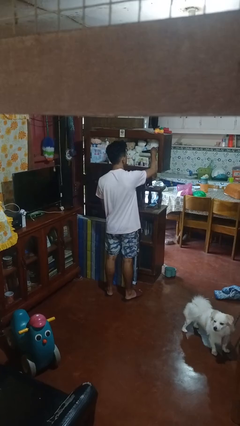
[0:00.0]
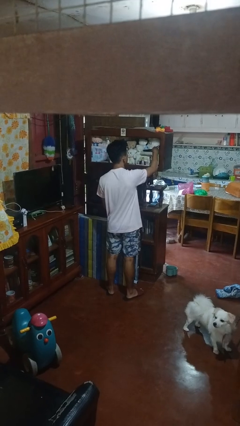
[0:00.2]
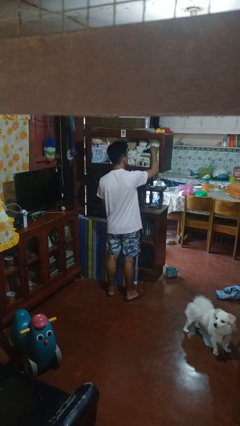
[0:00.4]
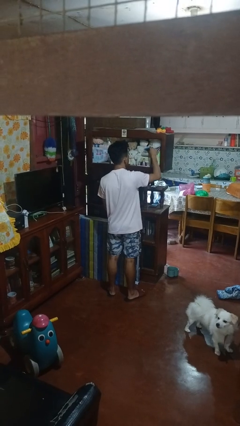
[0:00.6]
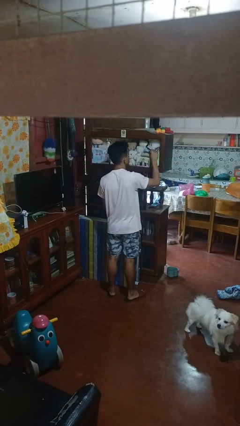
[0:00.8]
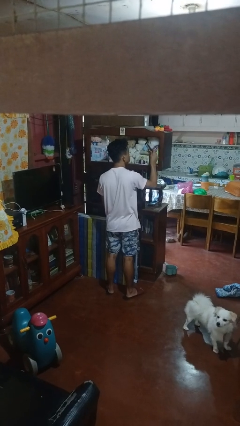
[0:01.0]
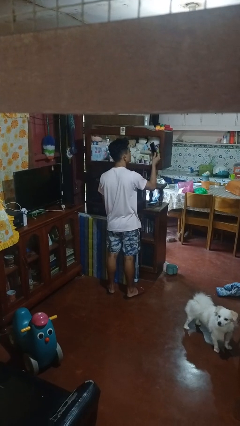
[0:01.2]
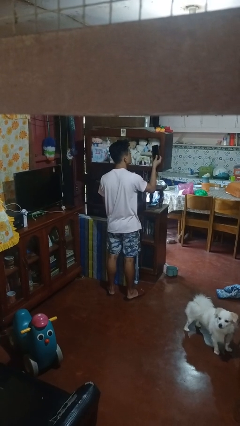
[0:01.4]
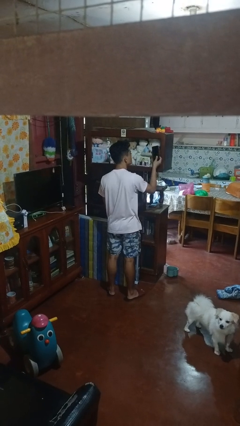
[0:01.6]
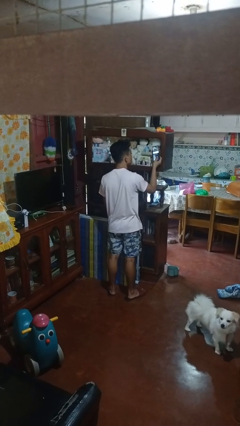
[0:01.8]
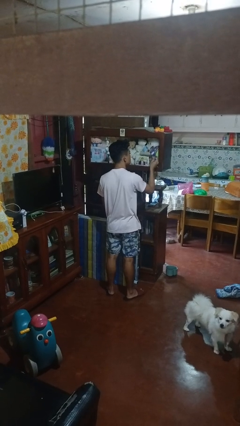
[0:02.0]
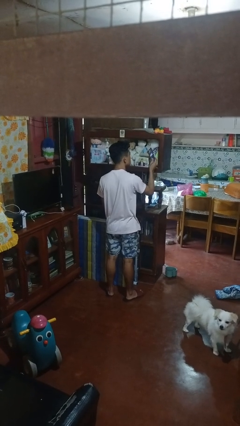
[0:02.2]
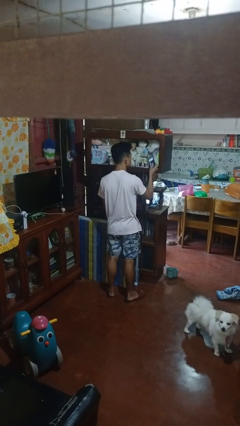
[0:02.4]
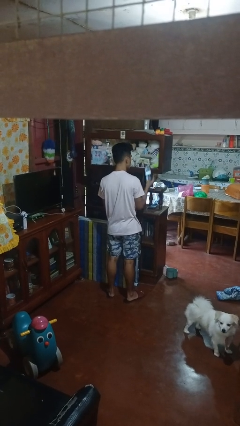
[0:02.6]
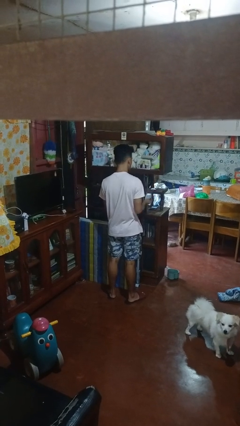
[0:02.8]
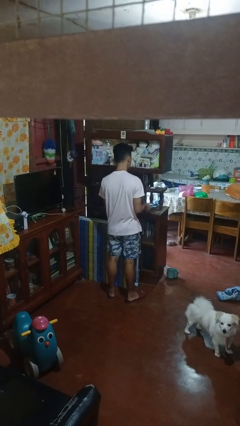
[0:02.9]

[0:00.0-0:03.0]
person picks up object from shelf

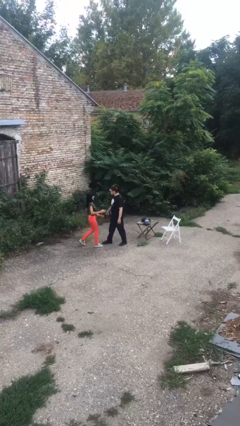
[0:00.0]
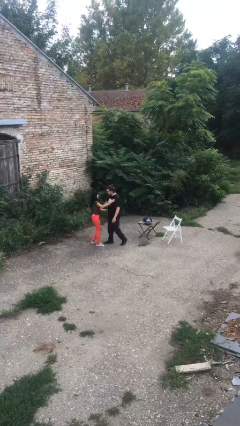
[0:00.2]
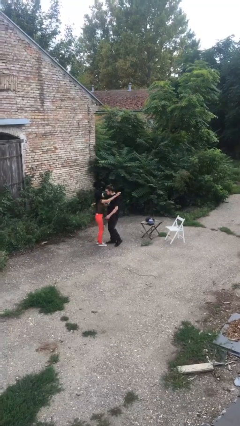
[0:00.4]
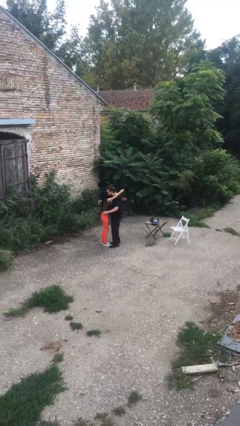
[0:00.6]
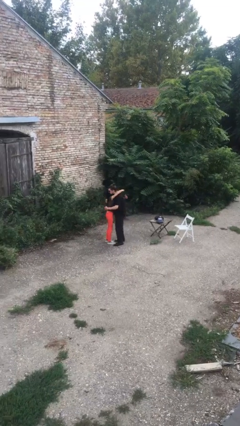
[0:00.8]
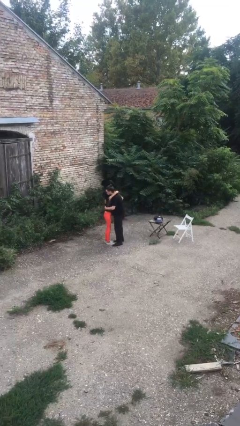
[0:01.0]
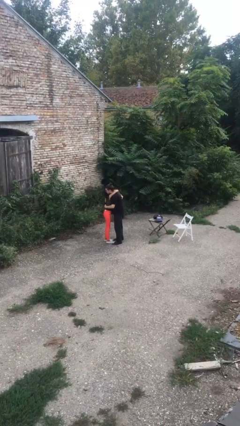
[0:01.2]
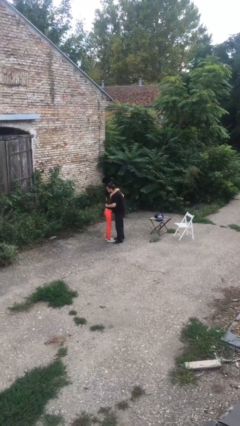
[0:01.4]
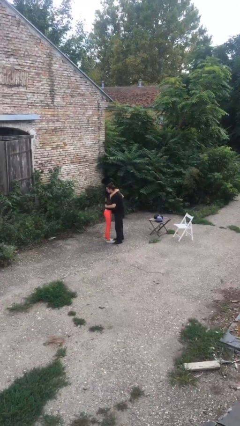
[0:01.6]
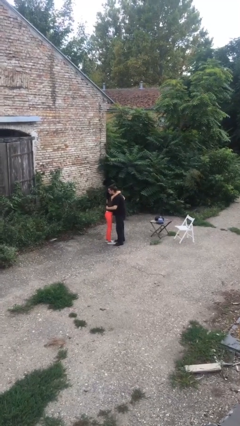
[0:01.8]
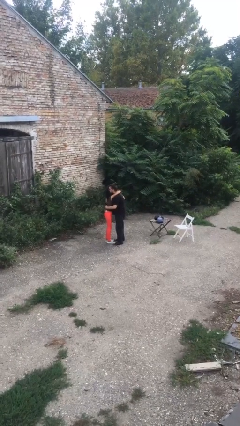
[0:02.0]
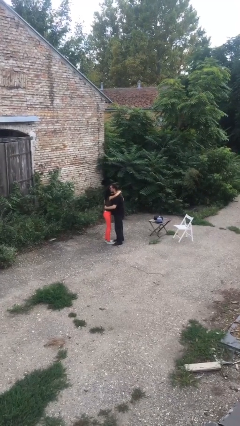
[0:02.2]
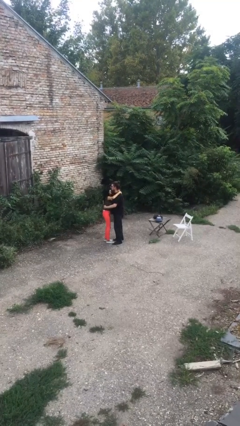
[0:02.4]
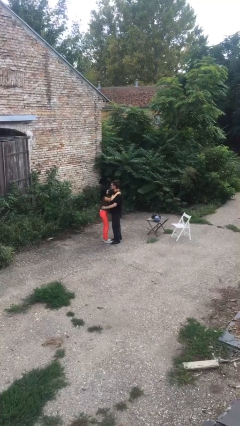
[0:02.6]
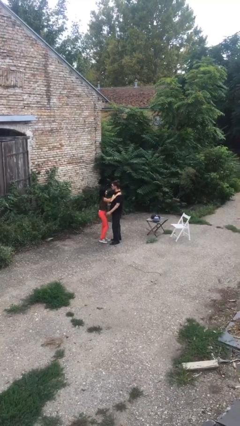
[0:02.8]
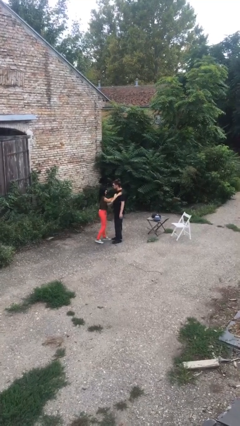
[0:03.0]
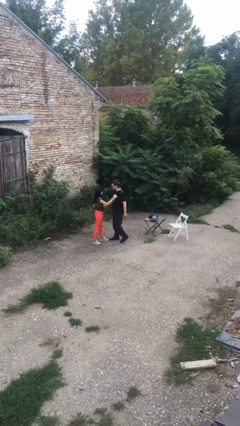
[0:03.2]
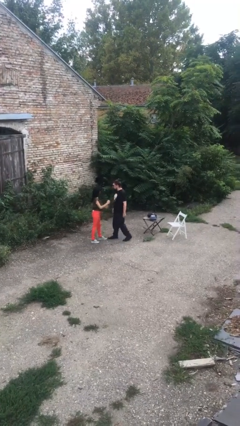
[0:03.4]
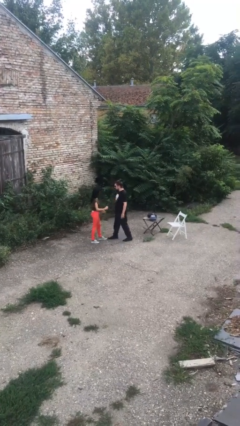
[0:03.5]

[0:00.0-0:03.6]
person embraces person

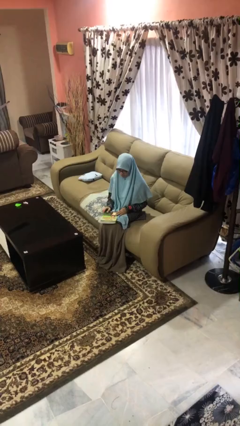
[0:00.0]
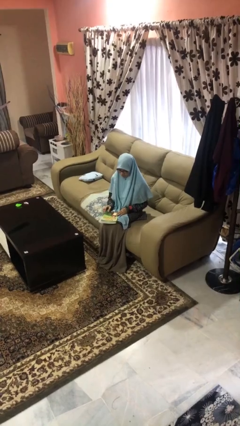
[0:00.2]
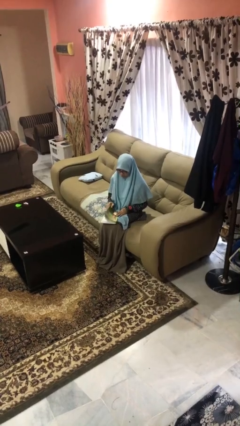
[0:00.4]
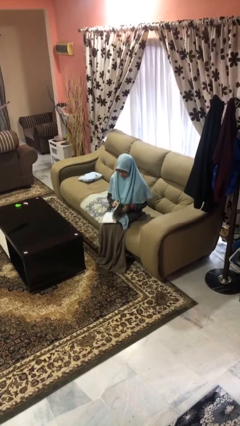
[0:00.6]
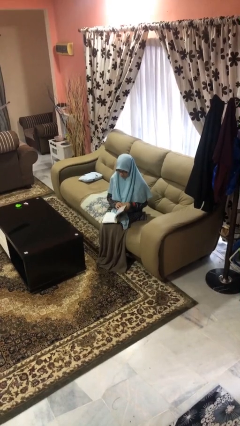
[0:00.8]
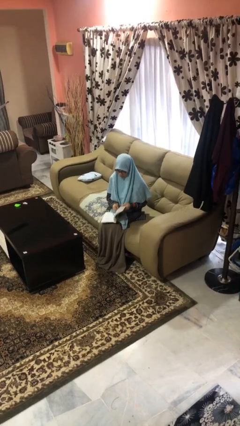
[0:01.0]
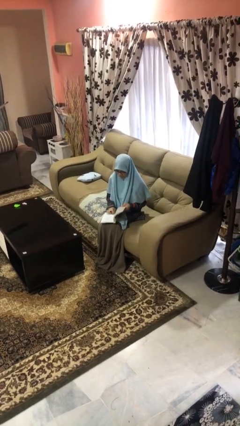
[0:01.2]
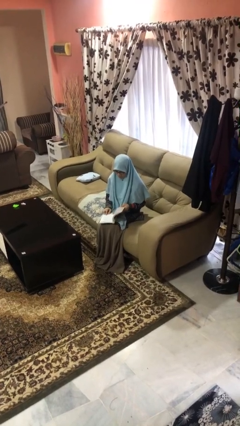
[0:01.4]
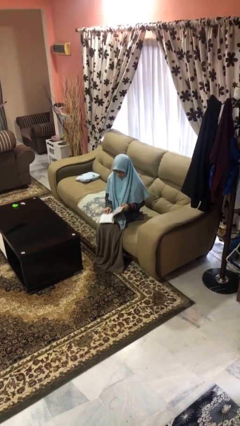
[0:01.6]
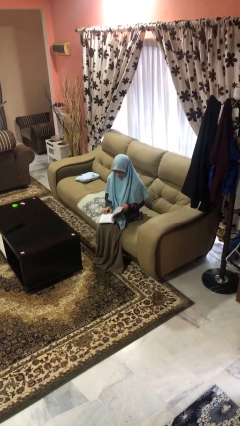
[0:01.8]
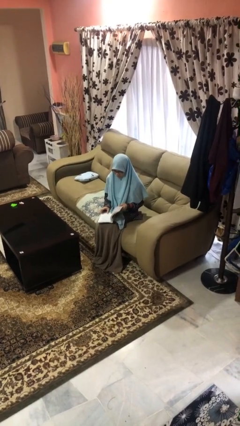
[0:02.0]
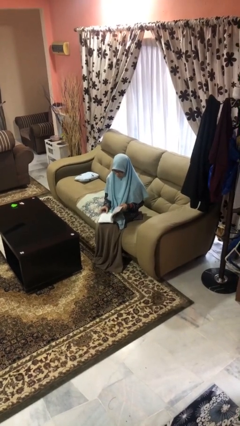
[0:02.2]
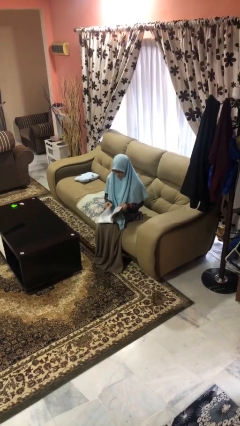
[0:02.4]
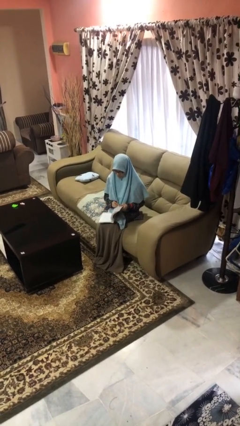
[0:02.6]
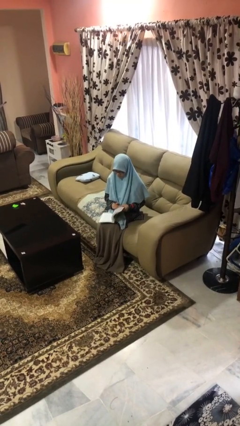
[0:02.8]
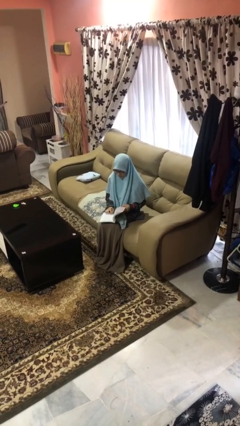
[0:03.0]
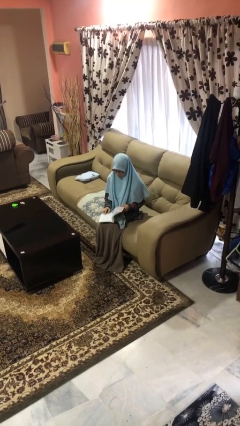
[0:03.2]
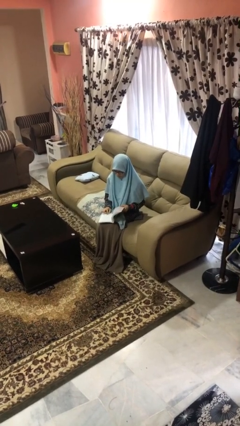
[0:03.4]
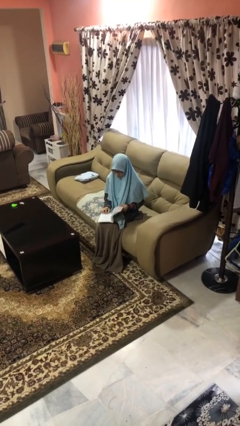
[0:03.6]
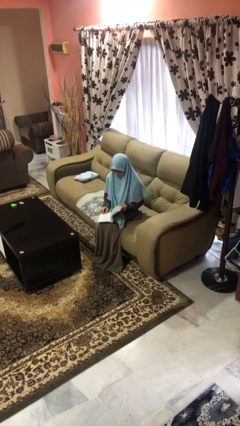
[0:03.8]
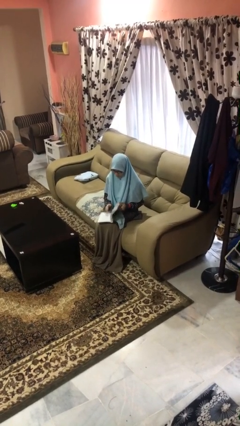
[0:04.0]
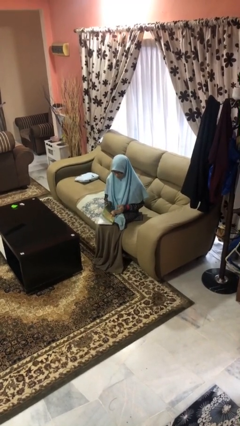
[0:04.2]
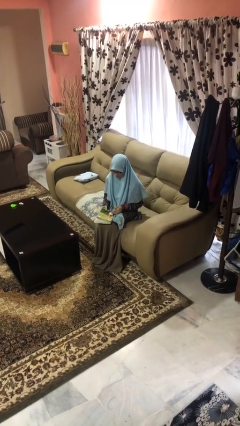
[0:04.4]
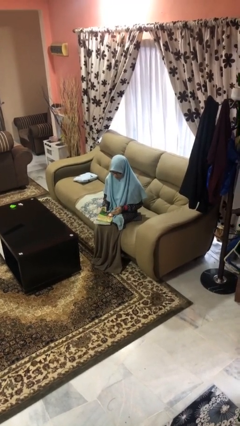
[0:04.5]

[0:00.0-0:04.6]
person reads book

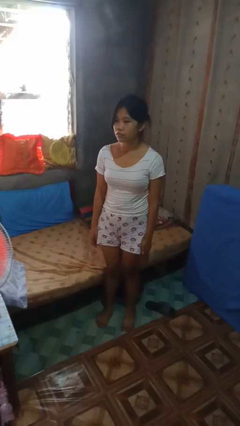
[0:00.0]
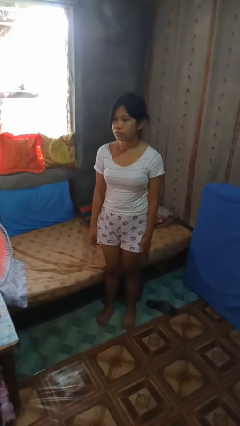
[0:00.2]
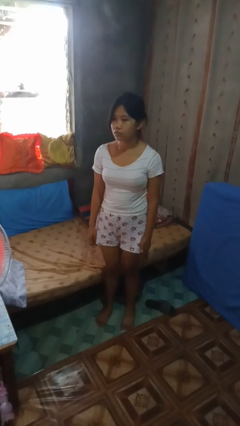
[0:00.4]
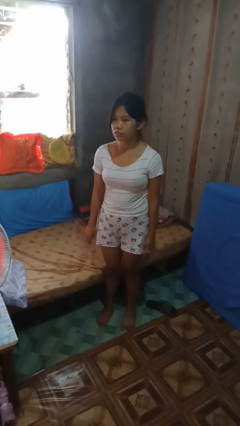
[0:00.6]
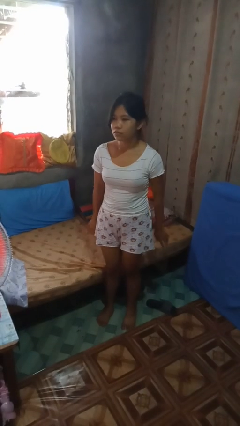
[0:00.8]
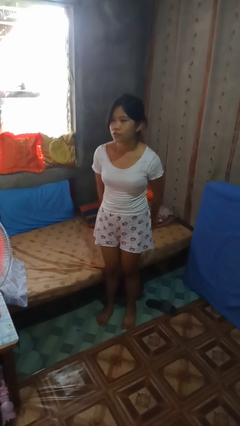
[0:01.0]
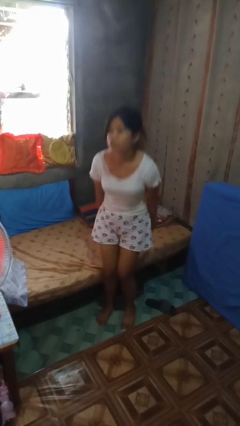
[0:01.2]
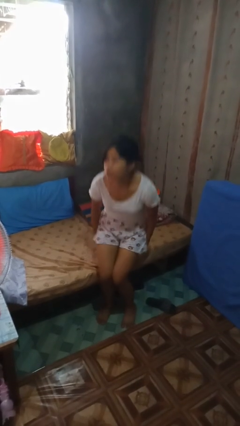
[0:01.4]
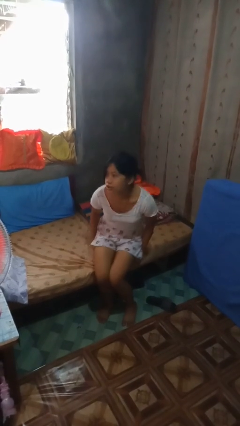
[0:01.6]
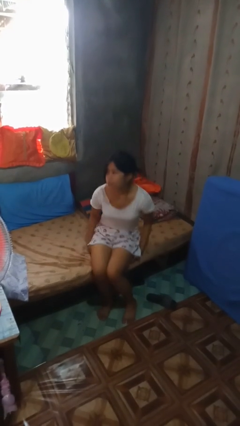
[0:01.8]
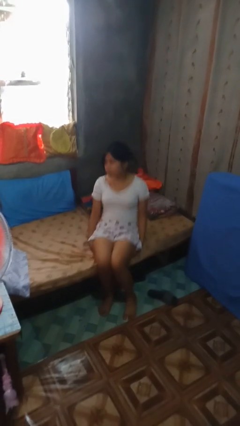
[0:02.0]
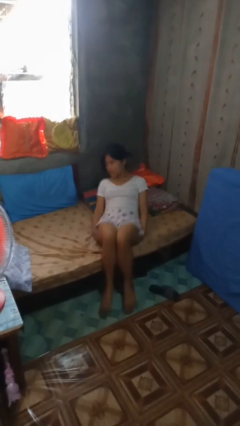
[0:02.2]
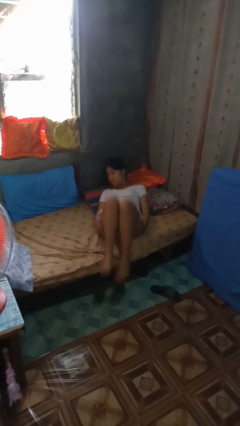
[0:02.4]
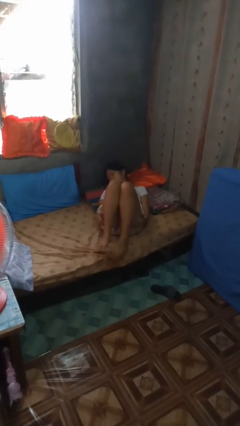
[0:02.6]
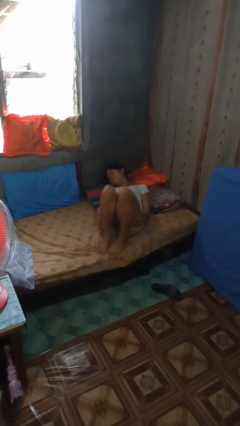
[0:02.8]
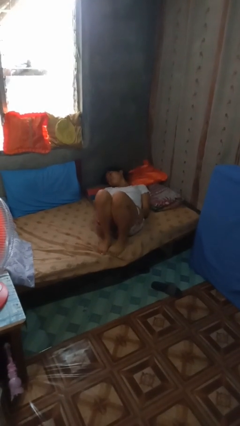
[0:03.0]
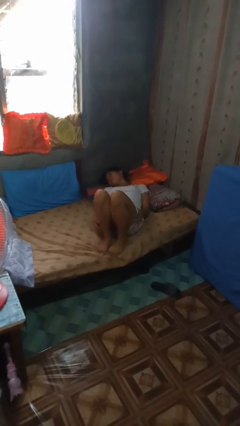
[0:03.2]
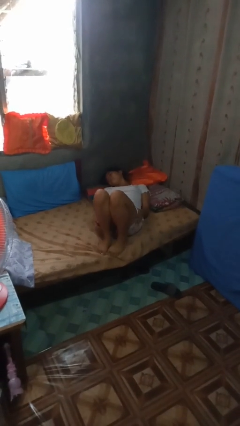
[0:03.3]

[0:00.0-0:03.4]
person lies down on bed

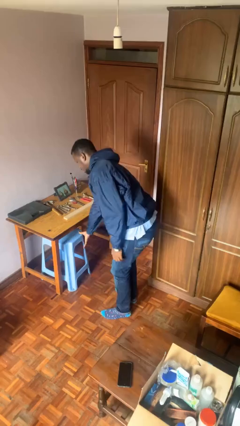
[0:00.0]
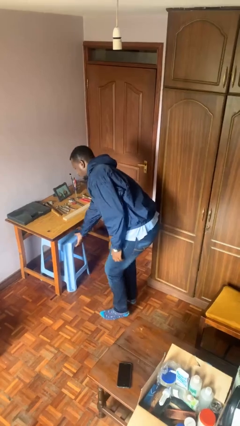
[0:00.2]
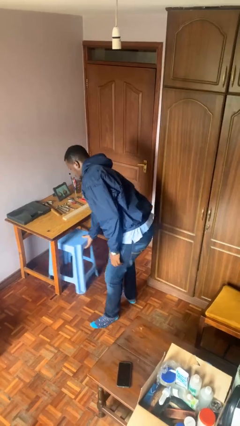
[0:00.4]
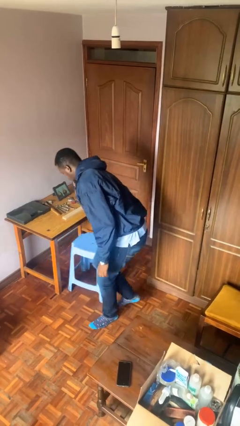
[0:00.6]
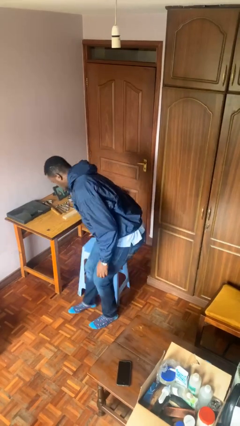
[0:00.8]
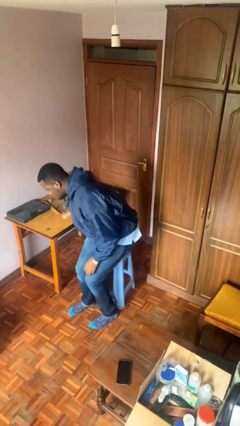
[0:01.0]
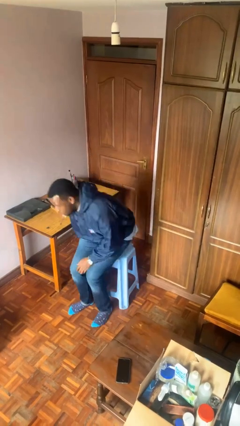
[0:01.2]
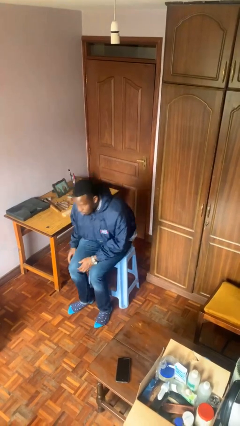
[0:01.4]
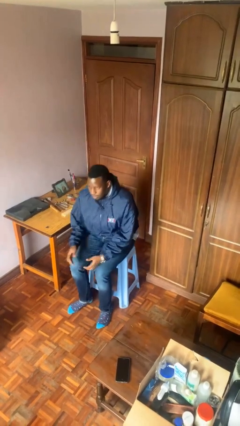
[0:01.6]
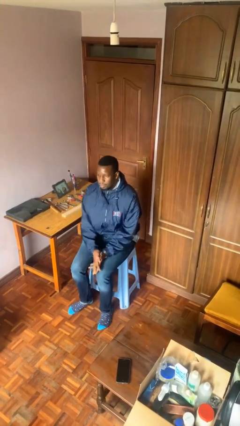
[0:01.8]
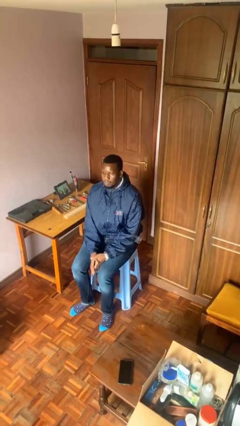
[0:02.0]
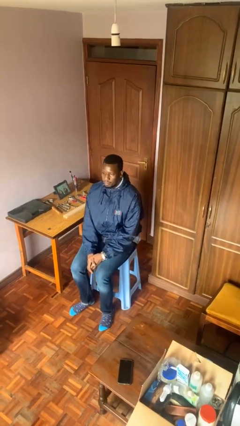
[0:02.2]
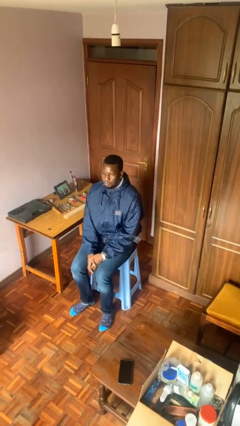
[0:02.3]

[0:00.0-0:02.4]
person sits down

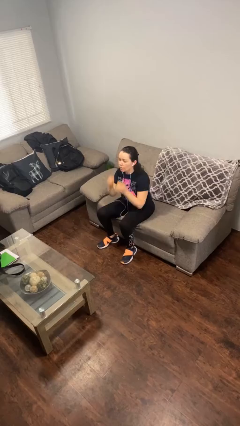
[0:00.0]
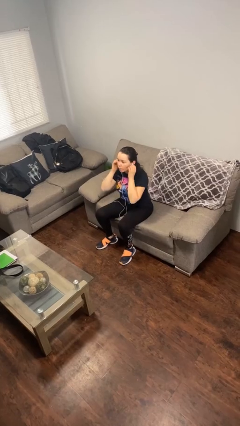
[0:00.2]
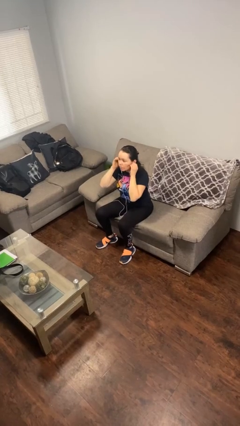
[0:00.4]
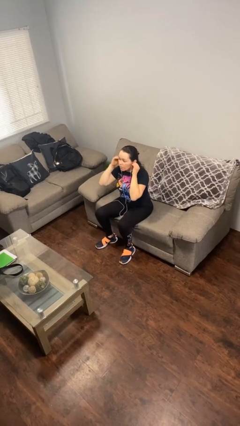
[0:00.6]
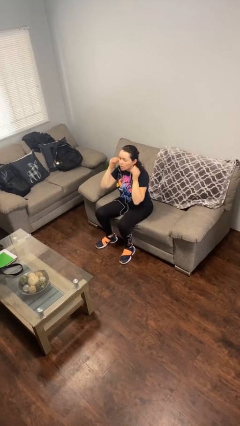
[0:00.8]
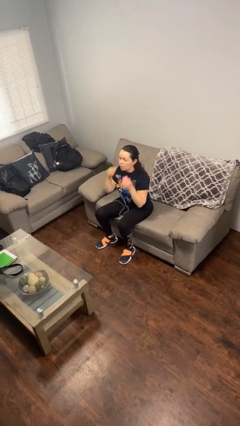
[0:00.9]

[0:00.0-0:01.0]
person takes off headphones
